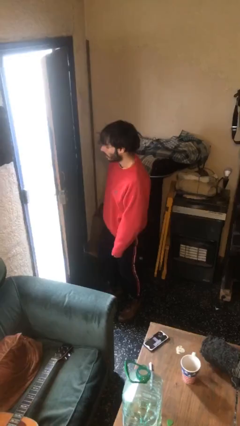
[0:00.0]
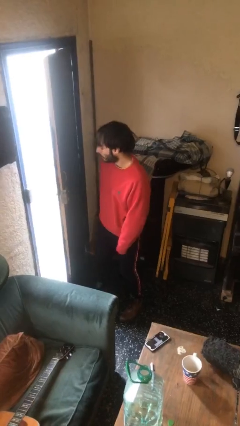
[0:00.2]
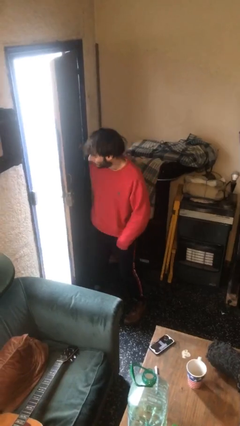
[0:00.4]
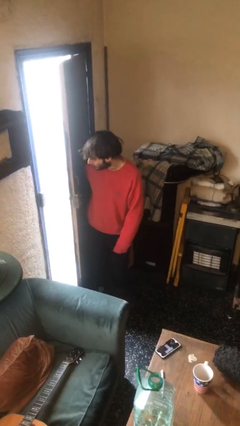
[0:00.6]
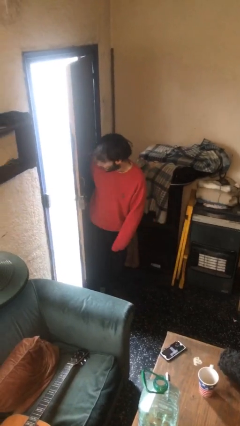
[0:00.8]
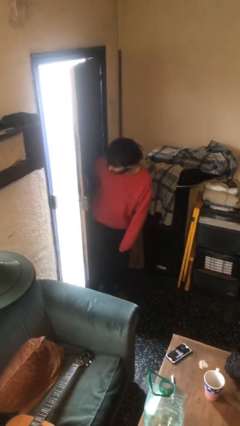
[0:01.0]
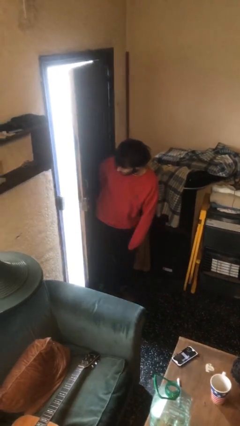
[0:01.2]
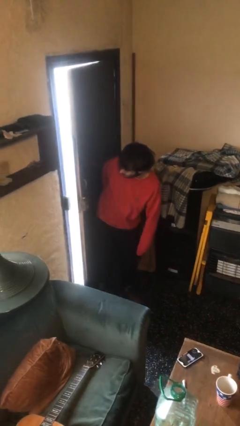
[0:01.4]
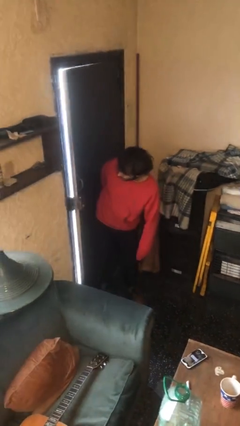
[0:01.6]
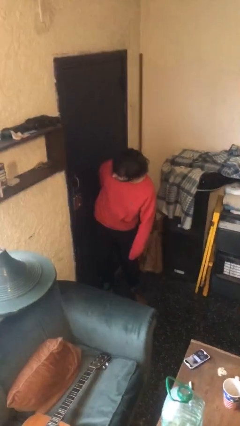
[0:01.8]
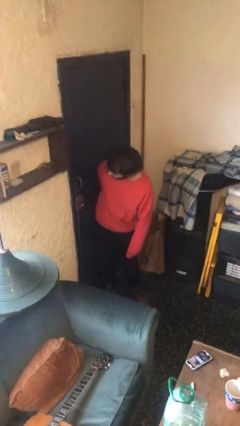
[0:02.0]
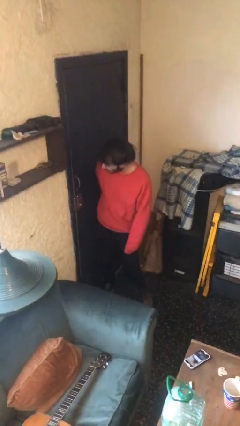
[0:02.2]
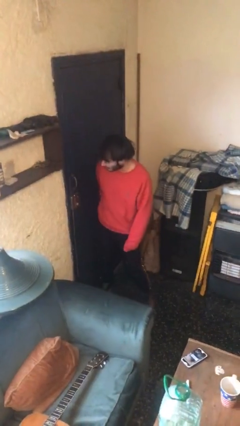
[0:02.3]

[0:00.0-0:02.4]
person closes door with hip

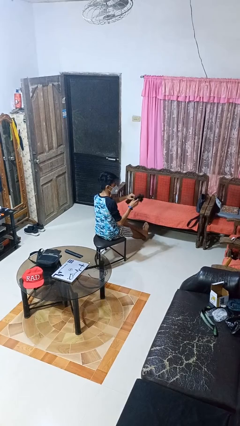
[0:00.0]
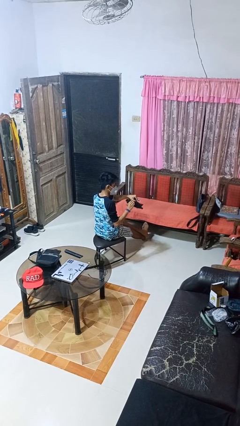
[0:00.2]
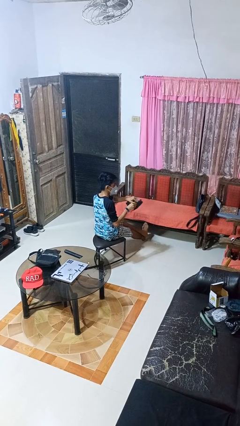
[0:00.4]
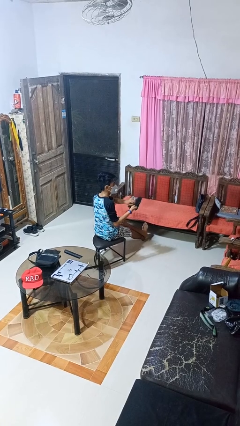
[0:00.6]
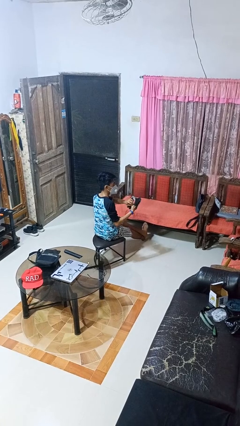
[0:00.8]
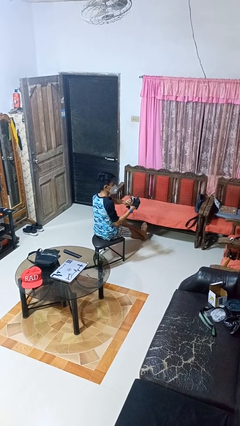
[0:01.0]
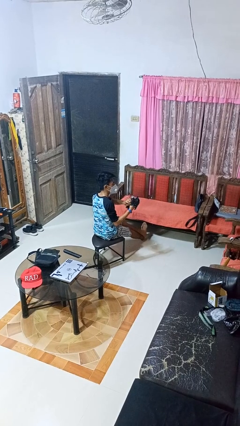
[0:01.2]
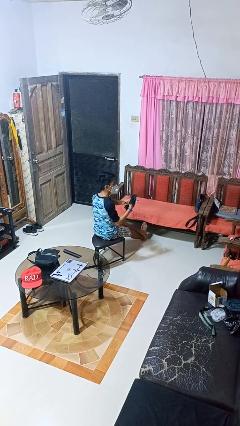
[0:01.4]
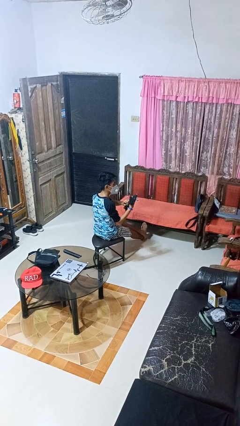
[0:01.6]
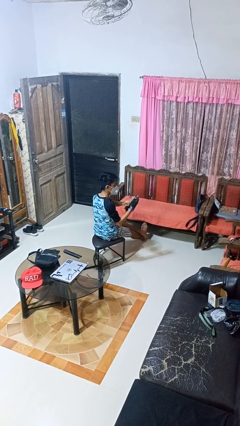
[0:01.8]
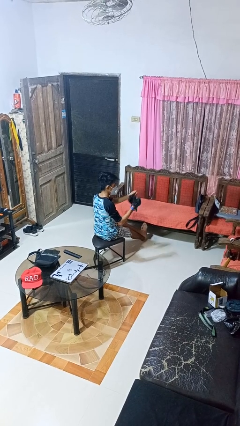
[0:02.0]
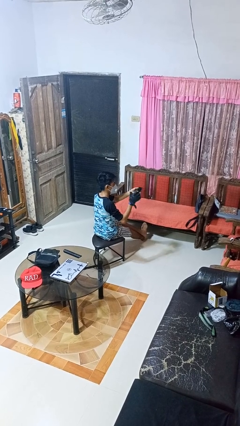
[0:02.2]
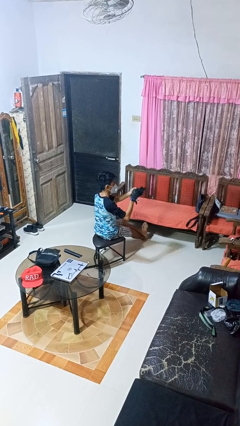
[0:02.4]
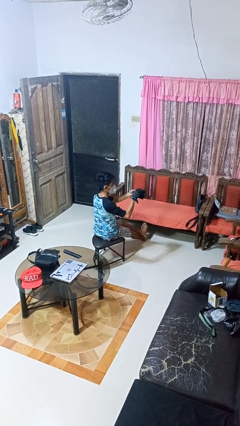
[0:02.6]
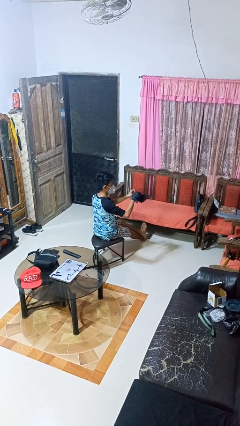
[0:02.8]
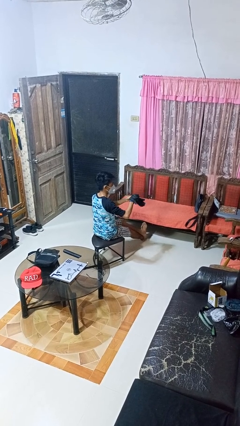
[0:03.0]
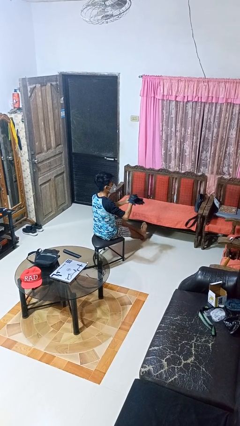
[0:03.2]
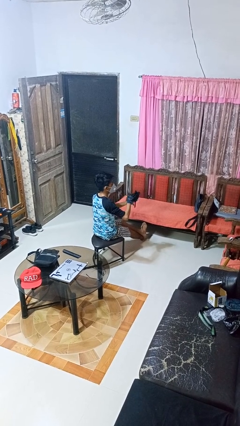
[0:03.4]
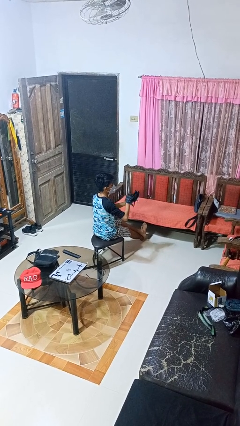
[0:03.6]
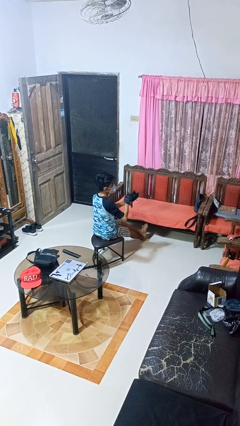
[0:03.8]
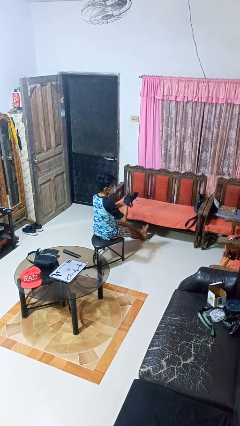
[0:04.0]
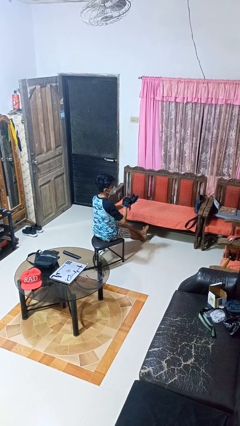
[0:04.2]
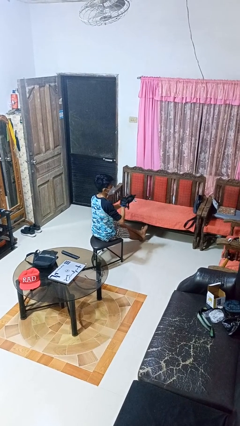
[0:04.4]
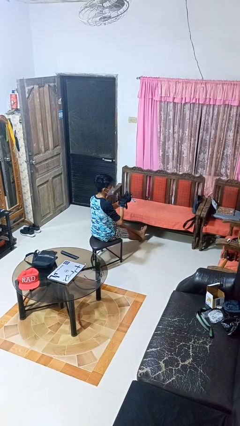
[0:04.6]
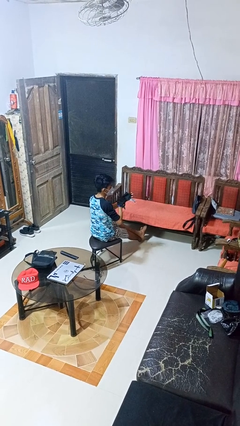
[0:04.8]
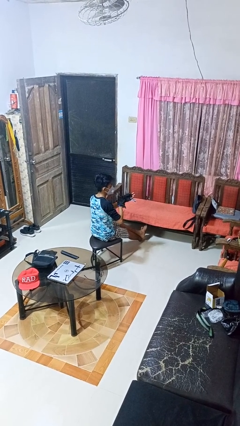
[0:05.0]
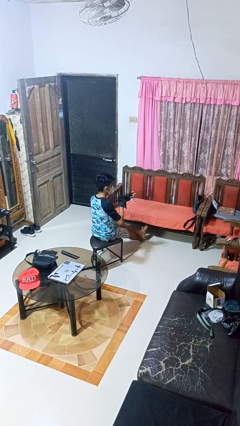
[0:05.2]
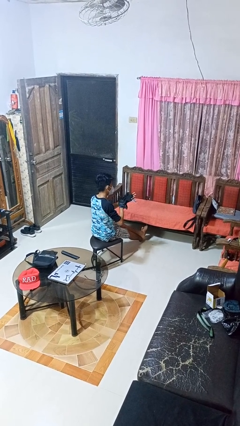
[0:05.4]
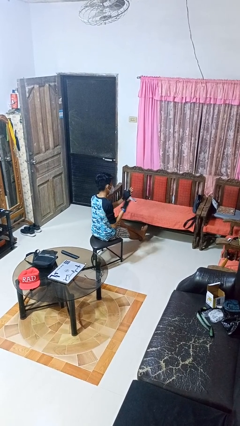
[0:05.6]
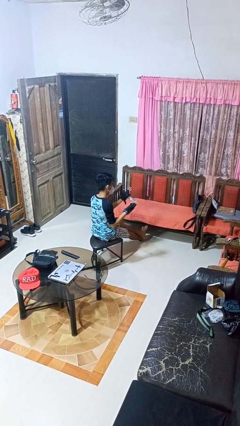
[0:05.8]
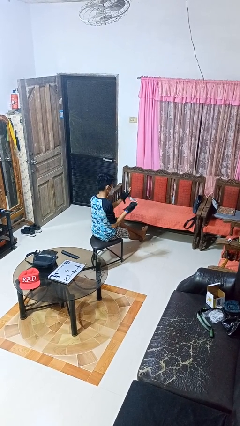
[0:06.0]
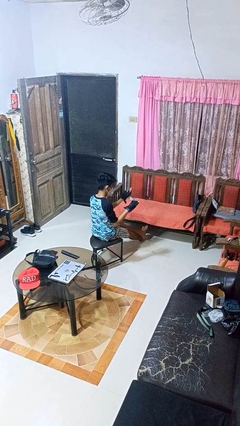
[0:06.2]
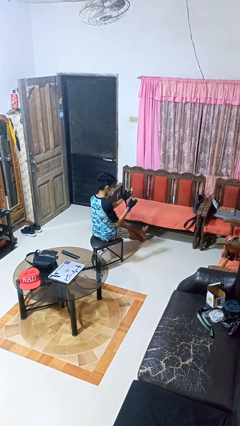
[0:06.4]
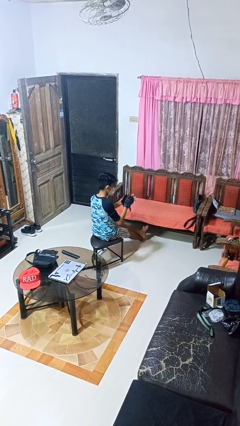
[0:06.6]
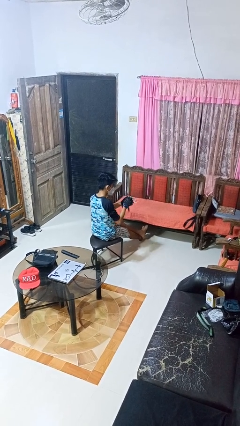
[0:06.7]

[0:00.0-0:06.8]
person puts on gloves

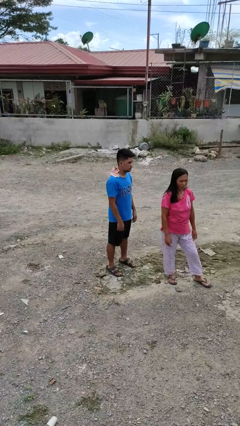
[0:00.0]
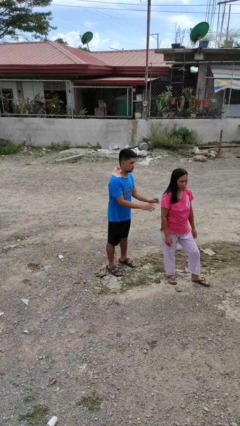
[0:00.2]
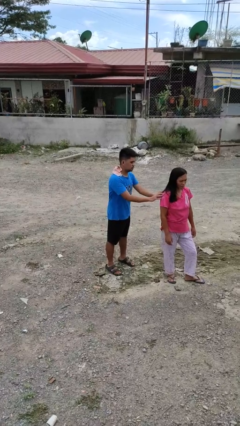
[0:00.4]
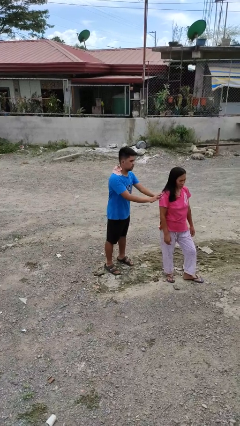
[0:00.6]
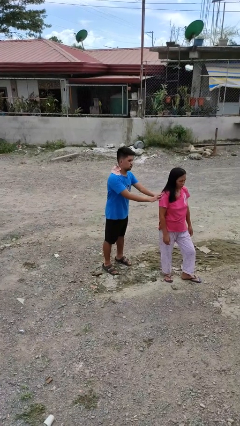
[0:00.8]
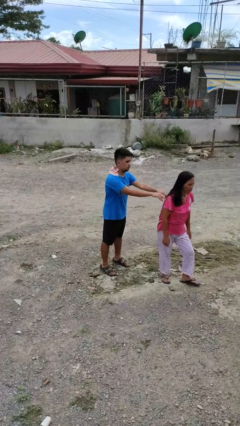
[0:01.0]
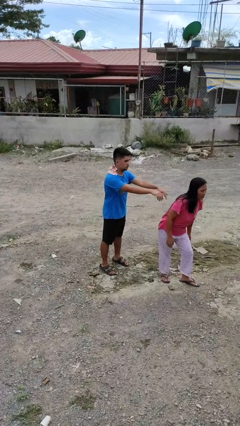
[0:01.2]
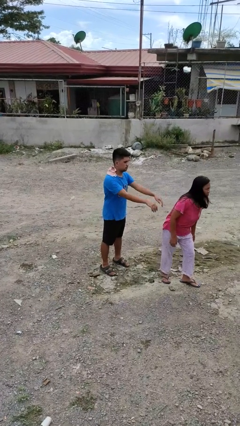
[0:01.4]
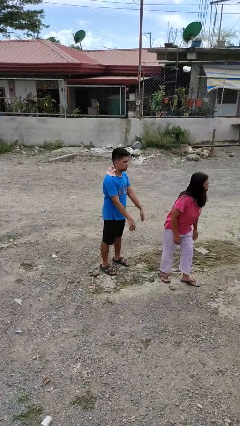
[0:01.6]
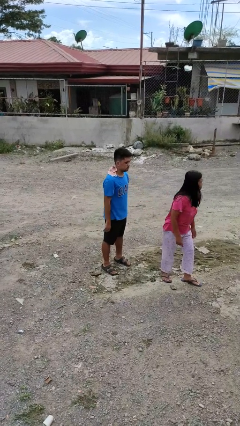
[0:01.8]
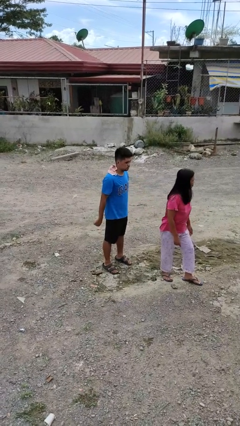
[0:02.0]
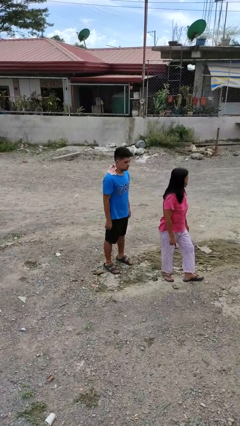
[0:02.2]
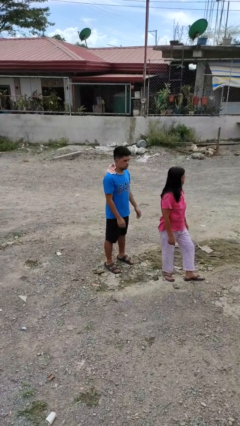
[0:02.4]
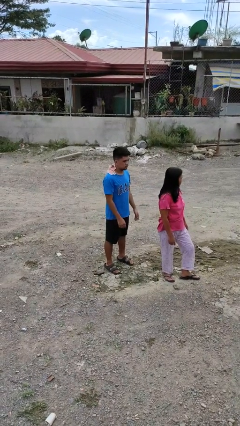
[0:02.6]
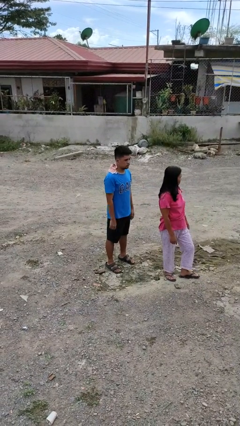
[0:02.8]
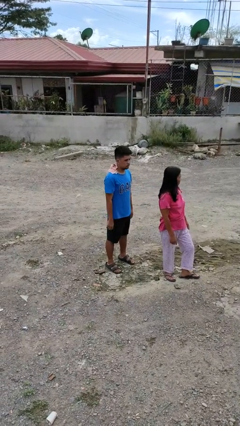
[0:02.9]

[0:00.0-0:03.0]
person shoves person

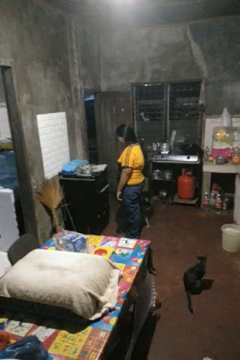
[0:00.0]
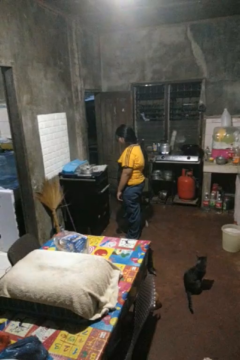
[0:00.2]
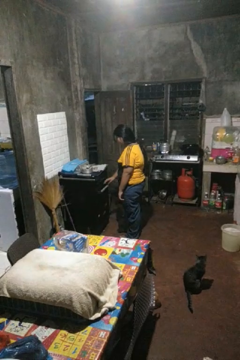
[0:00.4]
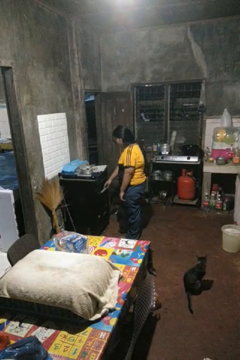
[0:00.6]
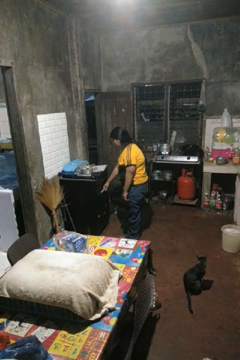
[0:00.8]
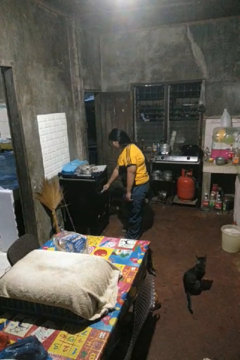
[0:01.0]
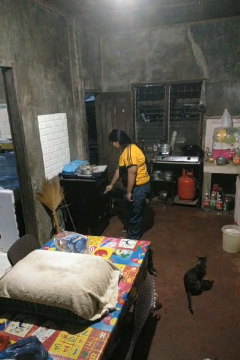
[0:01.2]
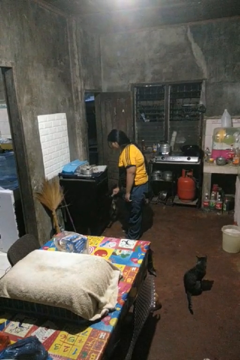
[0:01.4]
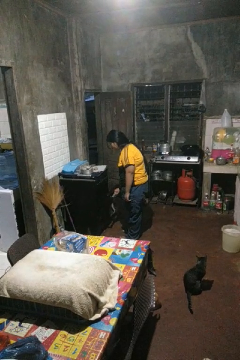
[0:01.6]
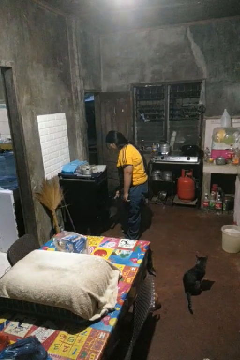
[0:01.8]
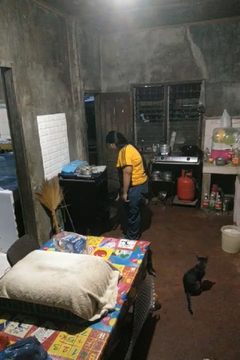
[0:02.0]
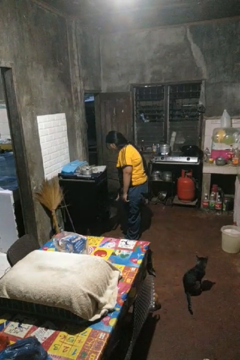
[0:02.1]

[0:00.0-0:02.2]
person opens oven door

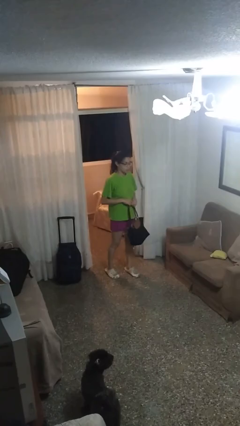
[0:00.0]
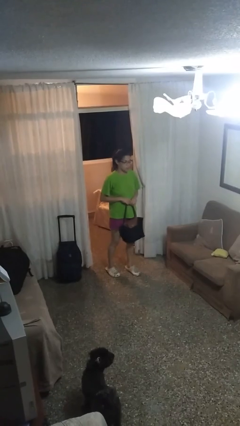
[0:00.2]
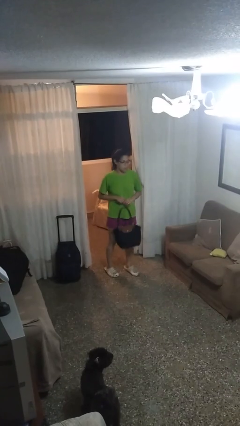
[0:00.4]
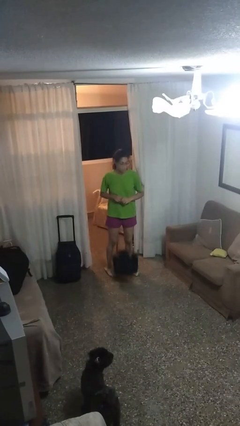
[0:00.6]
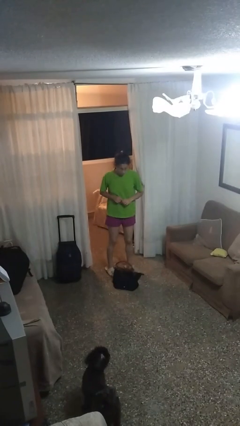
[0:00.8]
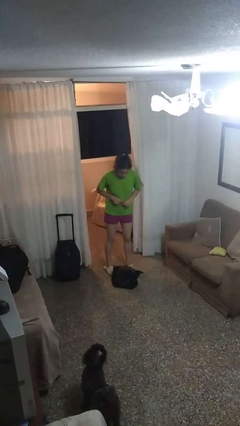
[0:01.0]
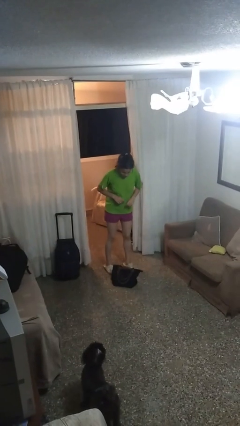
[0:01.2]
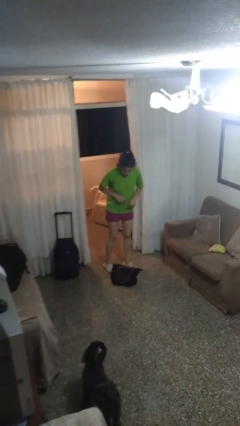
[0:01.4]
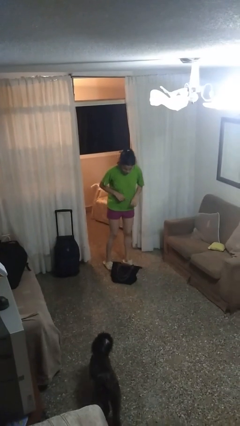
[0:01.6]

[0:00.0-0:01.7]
person drops object

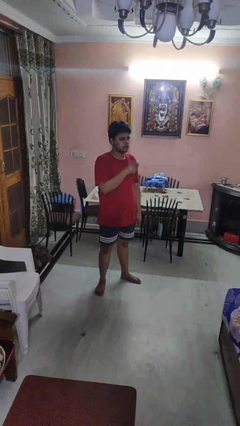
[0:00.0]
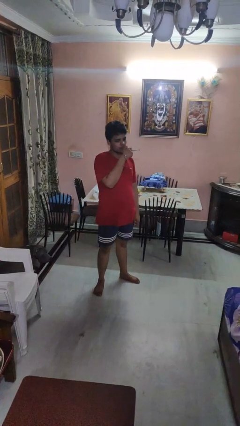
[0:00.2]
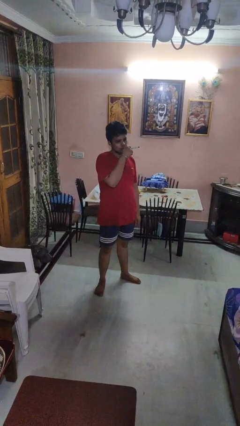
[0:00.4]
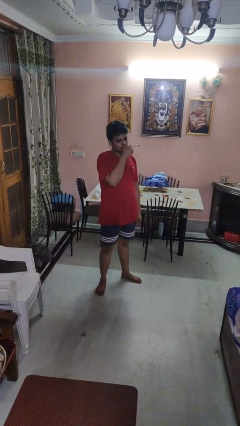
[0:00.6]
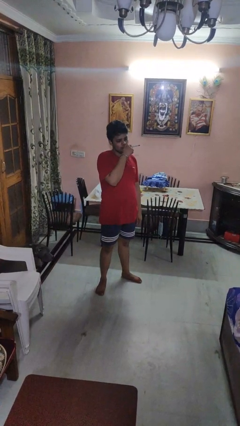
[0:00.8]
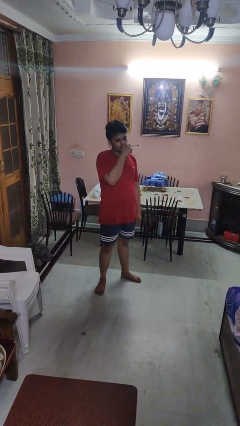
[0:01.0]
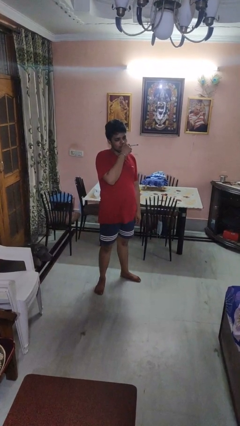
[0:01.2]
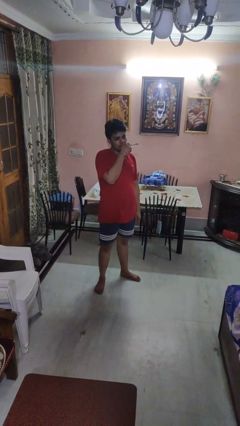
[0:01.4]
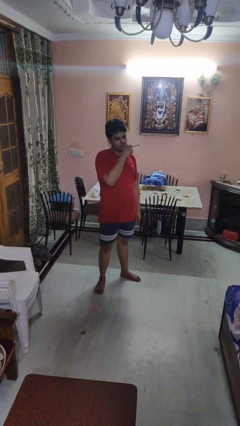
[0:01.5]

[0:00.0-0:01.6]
person vapes

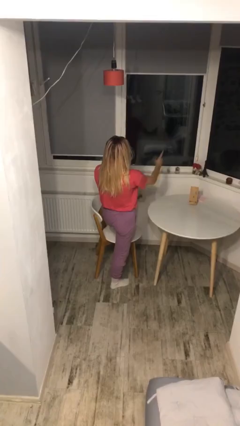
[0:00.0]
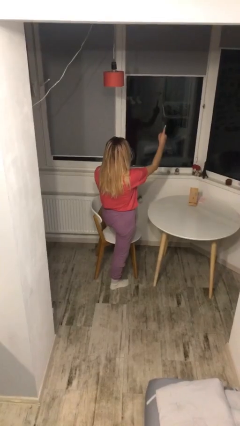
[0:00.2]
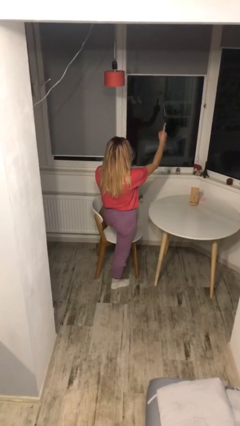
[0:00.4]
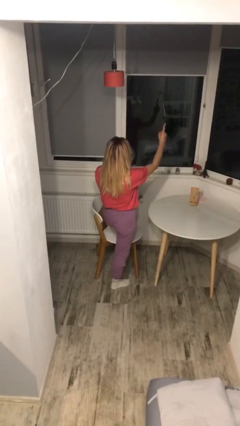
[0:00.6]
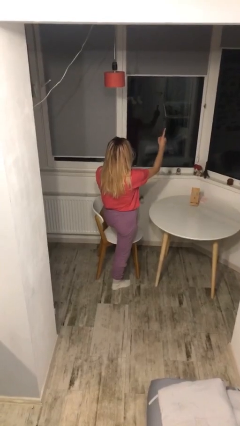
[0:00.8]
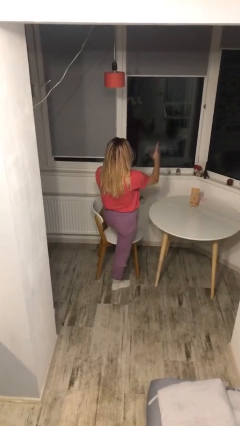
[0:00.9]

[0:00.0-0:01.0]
person gestures number one
